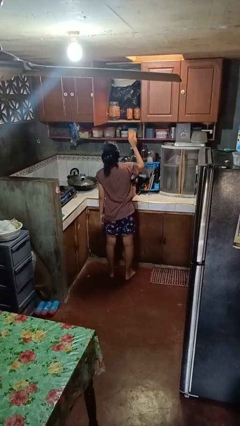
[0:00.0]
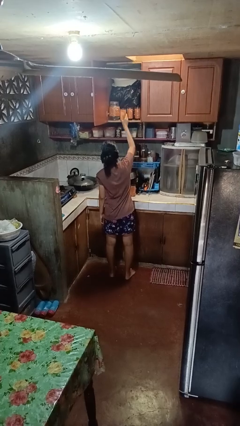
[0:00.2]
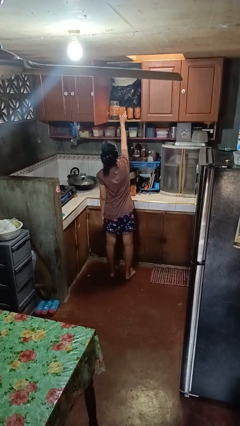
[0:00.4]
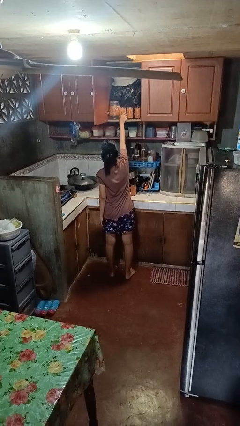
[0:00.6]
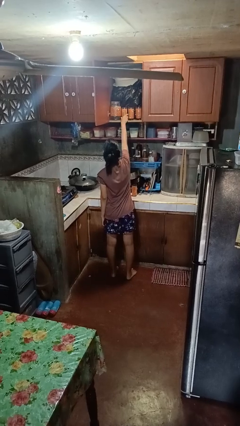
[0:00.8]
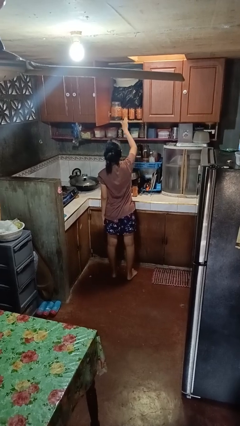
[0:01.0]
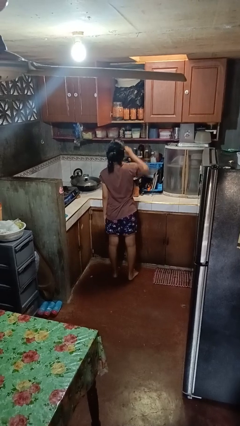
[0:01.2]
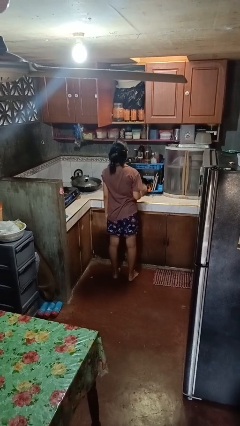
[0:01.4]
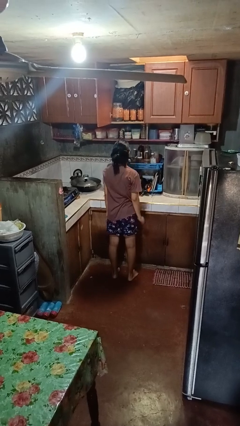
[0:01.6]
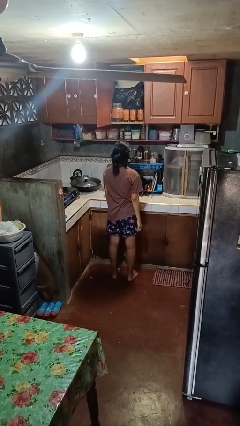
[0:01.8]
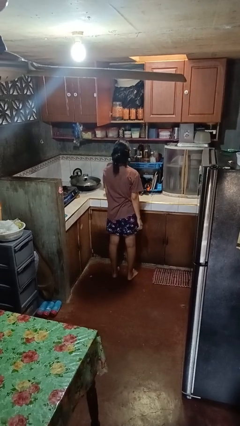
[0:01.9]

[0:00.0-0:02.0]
person puts object in cabinet

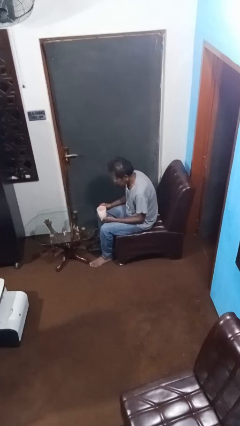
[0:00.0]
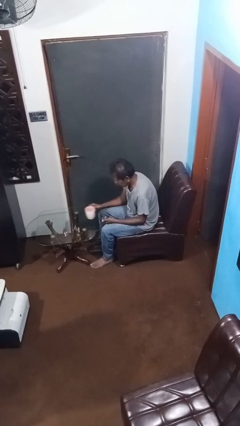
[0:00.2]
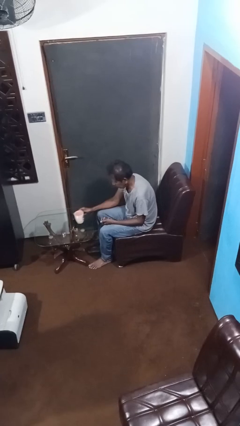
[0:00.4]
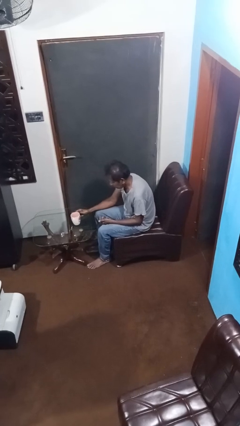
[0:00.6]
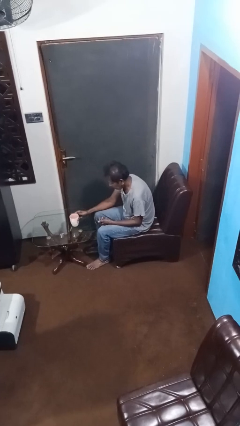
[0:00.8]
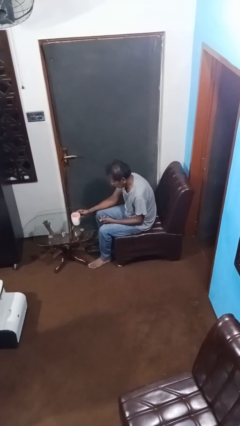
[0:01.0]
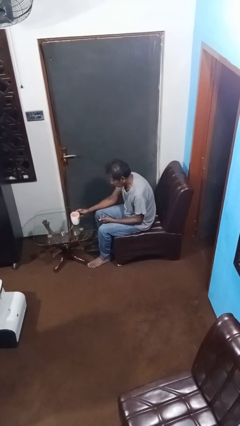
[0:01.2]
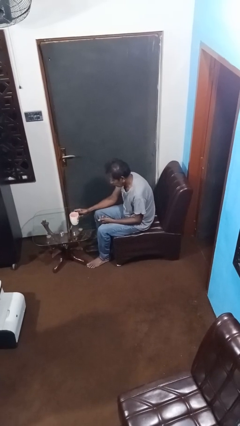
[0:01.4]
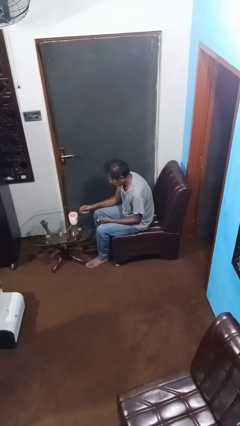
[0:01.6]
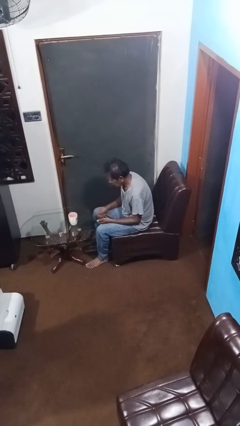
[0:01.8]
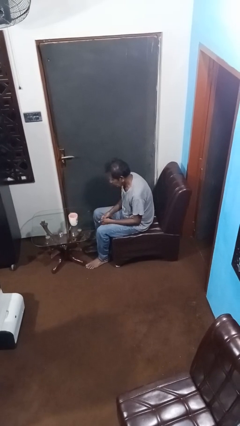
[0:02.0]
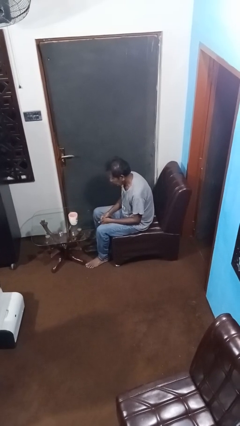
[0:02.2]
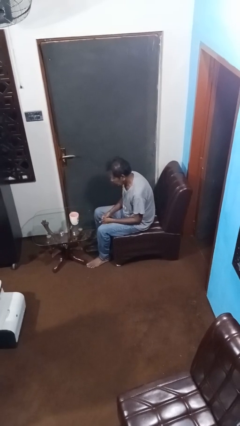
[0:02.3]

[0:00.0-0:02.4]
person puts down object on table

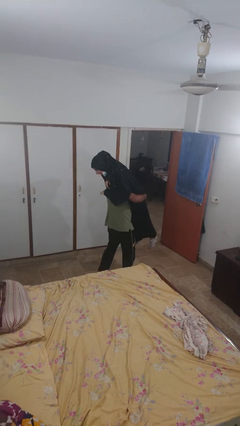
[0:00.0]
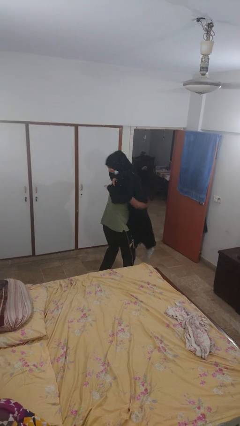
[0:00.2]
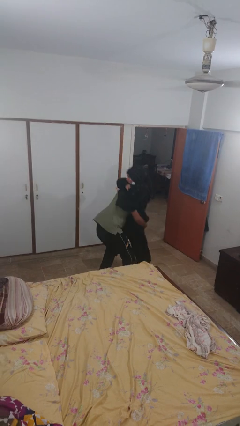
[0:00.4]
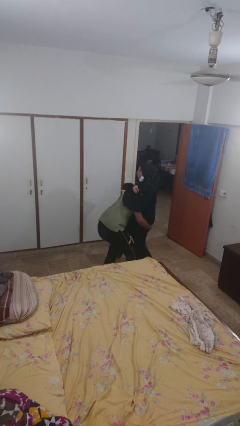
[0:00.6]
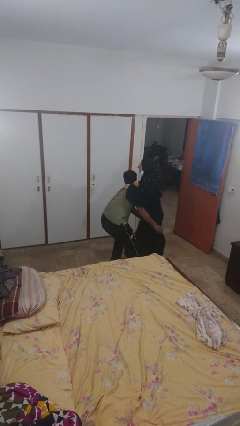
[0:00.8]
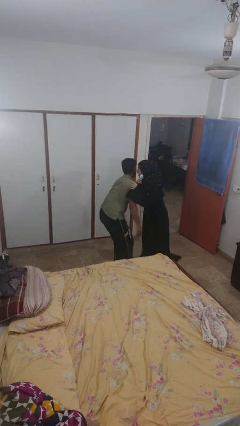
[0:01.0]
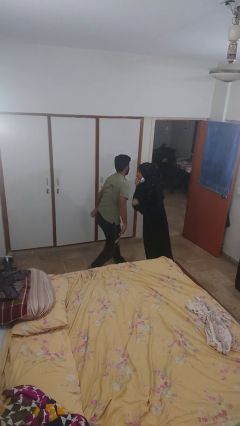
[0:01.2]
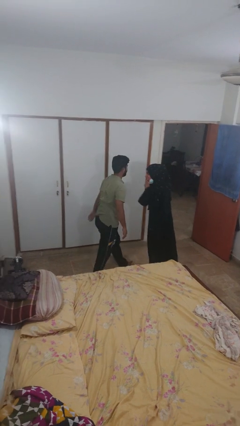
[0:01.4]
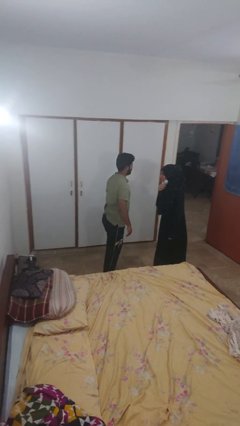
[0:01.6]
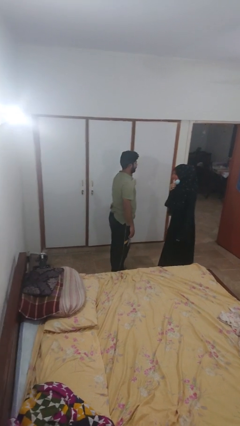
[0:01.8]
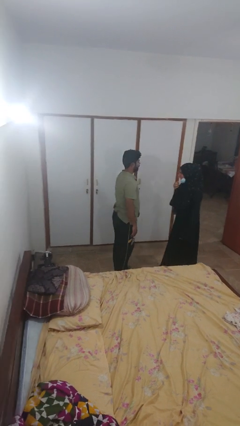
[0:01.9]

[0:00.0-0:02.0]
person puts down person

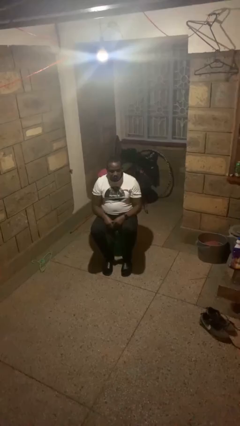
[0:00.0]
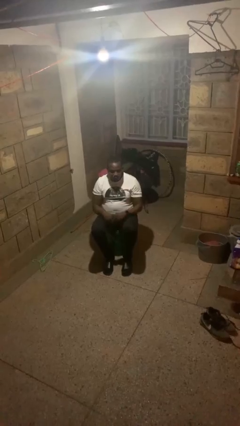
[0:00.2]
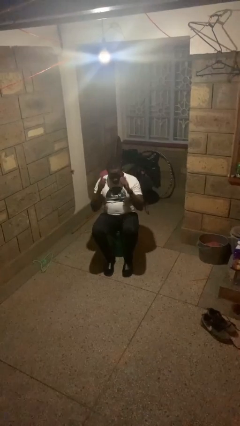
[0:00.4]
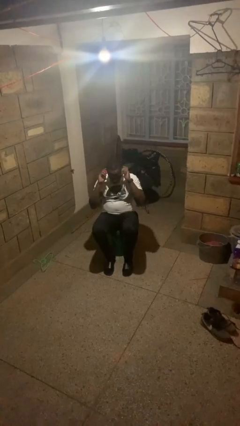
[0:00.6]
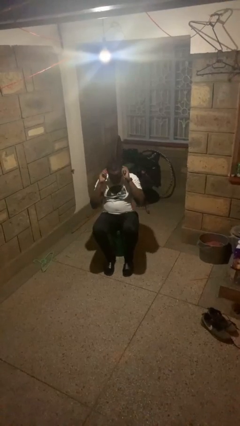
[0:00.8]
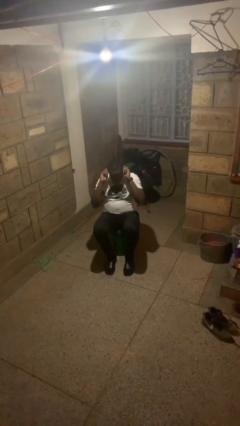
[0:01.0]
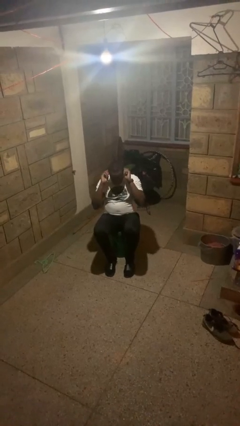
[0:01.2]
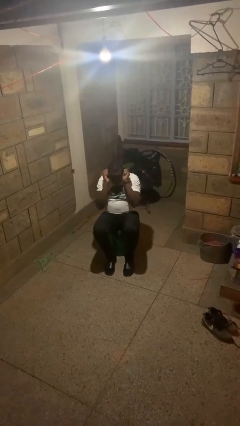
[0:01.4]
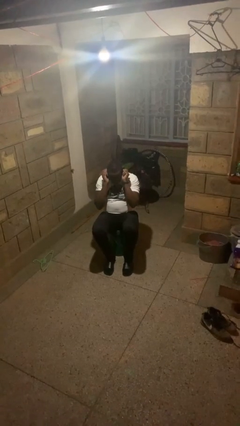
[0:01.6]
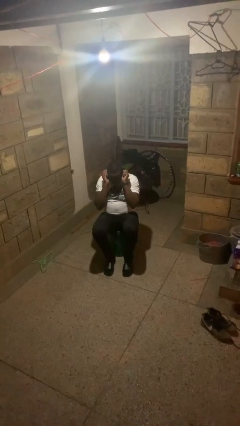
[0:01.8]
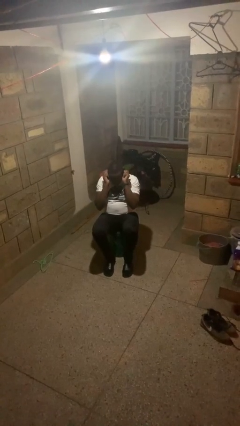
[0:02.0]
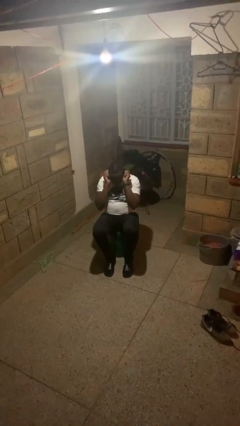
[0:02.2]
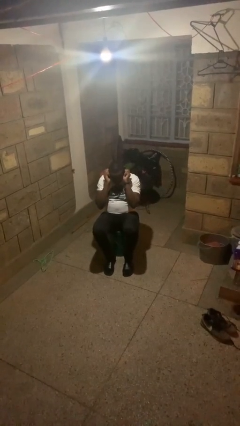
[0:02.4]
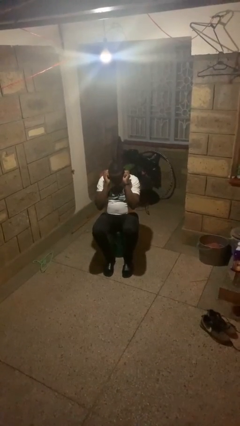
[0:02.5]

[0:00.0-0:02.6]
person touches earlobe

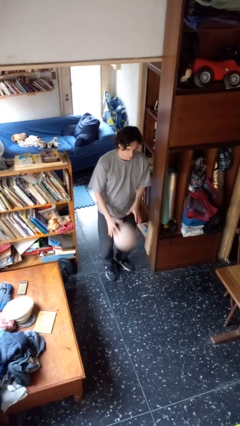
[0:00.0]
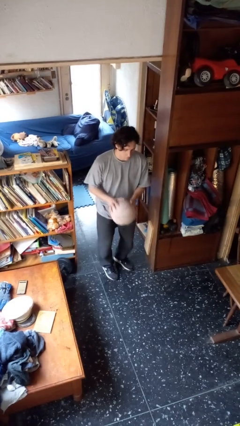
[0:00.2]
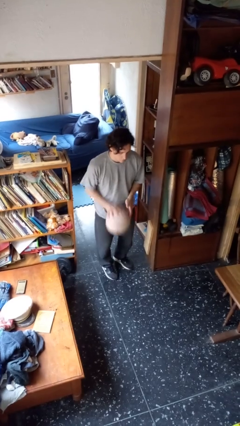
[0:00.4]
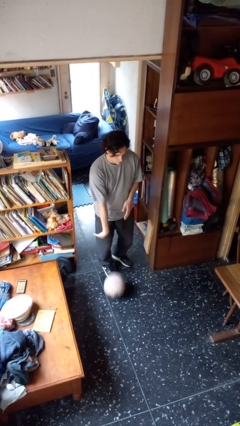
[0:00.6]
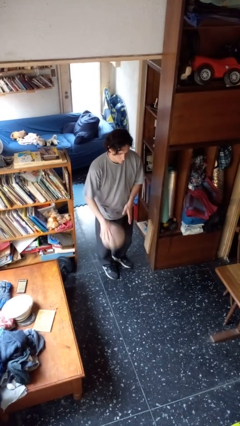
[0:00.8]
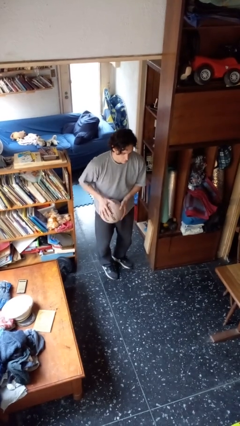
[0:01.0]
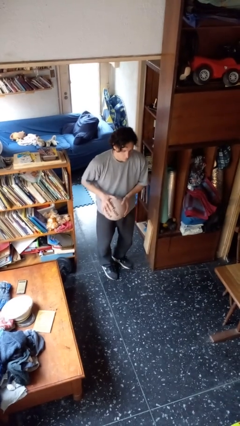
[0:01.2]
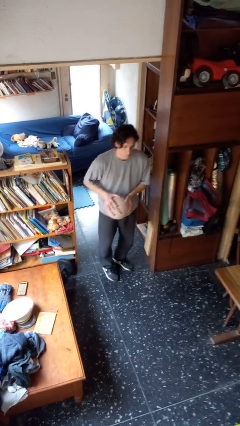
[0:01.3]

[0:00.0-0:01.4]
person bounces ball on floor

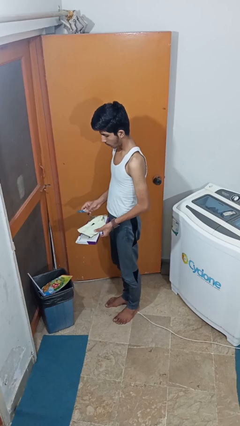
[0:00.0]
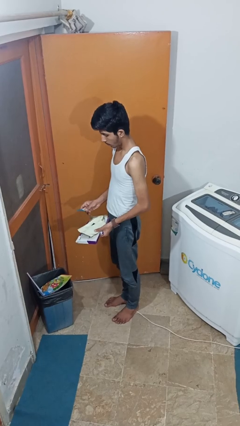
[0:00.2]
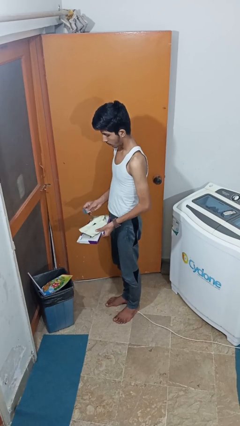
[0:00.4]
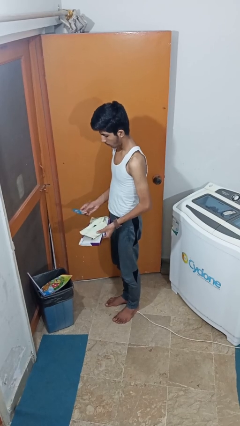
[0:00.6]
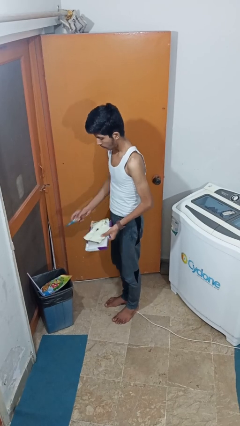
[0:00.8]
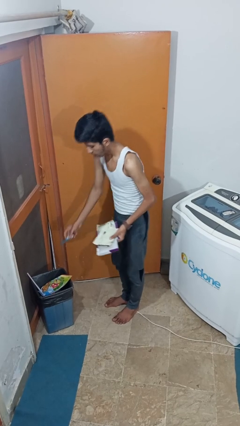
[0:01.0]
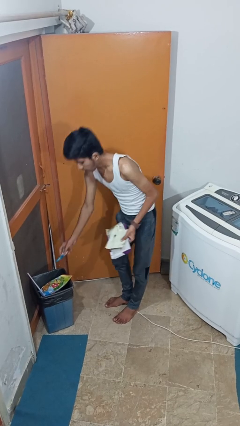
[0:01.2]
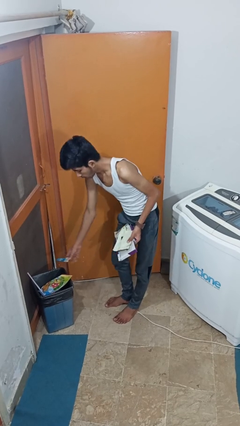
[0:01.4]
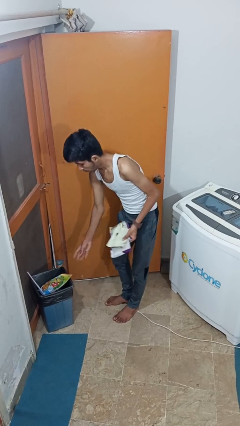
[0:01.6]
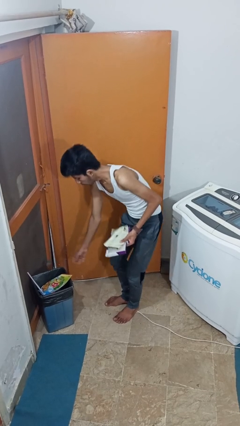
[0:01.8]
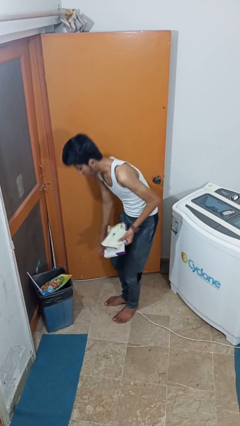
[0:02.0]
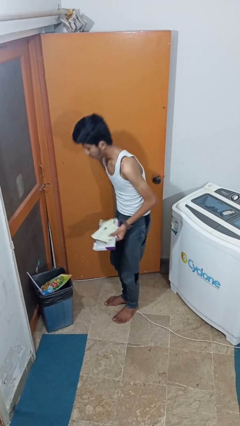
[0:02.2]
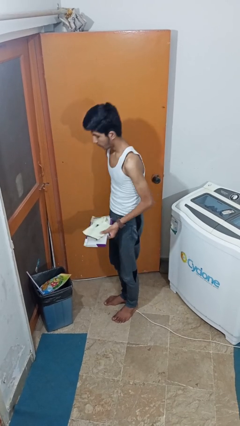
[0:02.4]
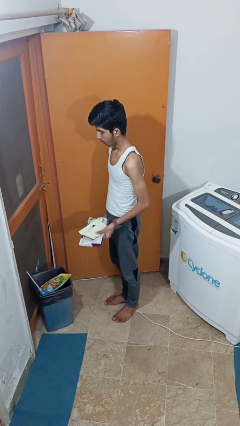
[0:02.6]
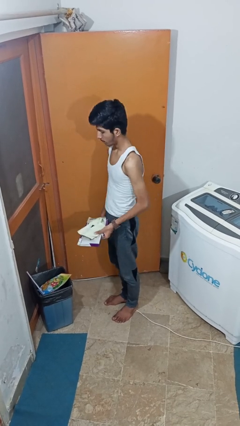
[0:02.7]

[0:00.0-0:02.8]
person discards trash

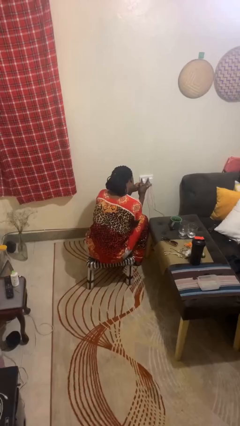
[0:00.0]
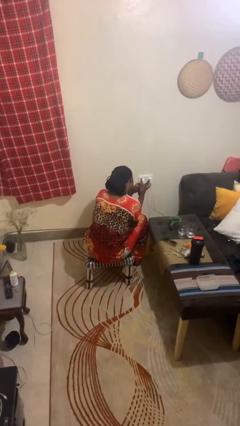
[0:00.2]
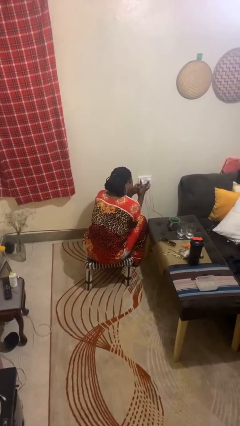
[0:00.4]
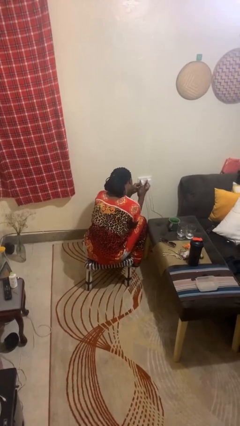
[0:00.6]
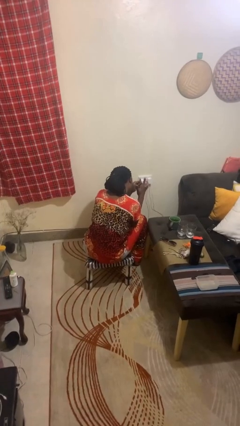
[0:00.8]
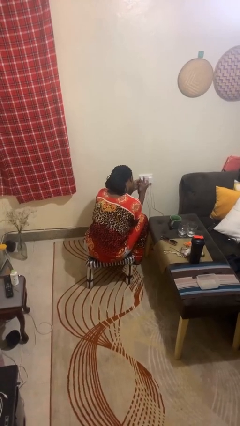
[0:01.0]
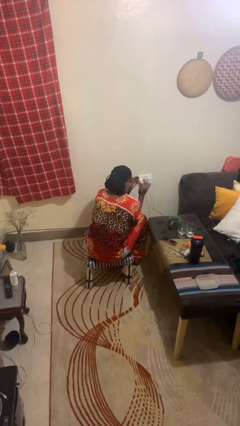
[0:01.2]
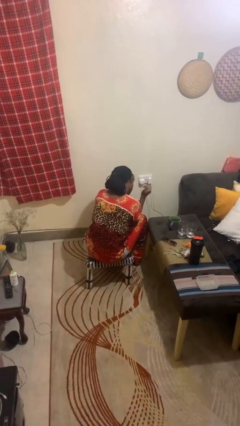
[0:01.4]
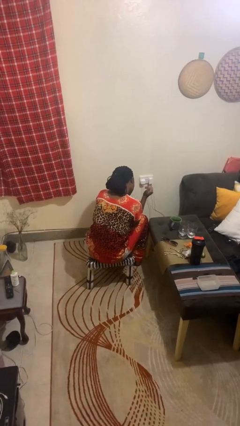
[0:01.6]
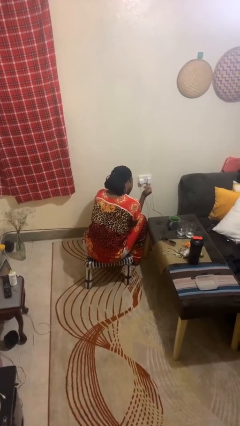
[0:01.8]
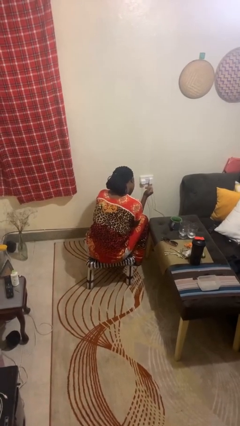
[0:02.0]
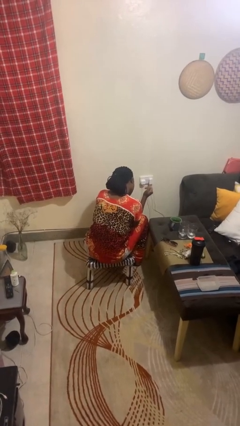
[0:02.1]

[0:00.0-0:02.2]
person takes off ring

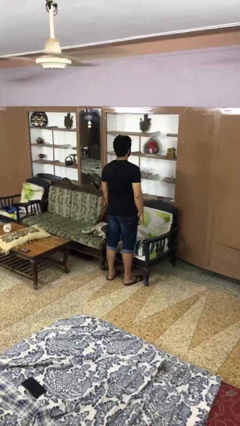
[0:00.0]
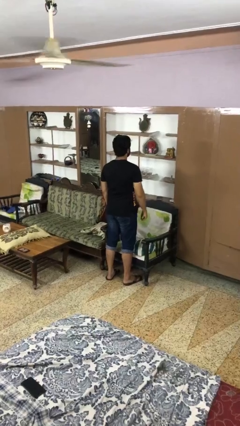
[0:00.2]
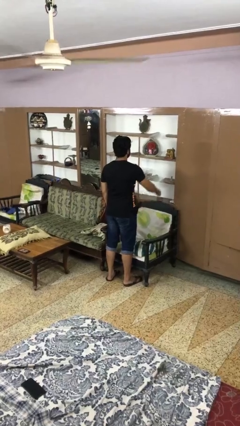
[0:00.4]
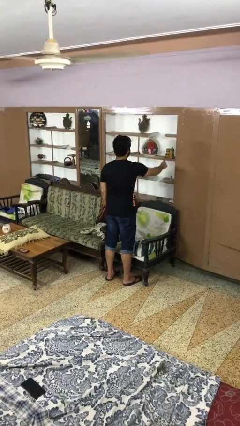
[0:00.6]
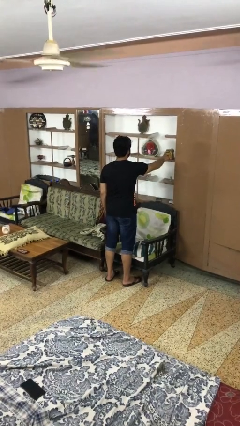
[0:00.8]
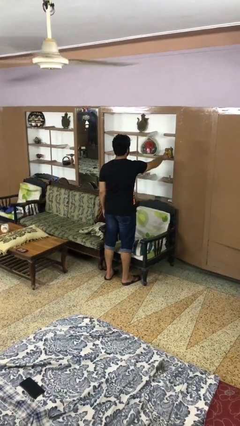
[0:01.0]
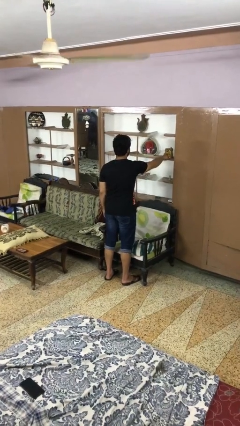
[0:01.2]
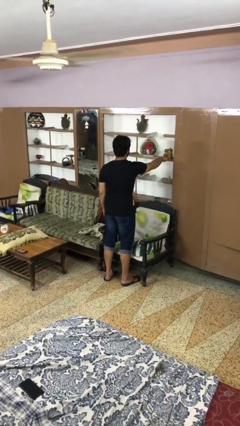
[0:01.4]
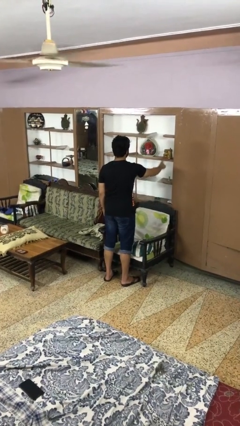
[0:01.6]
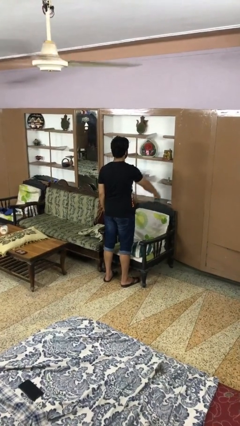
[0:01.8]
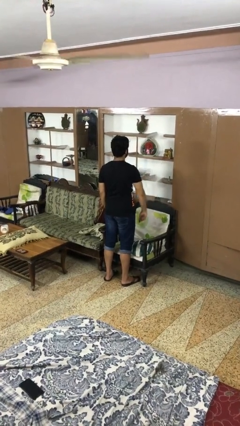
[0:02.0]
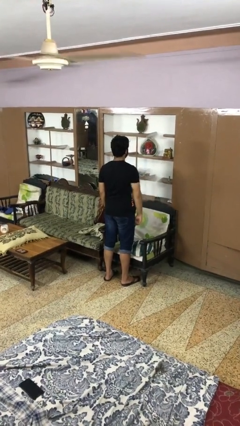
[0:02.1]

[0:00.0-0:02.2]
person taps object with finger
